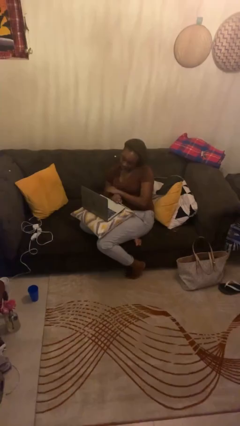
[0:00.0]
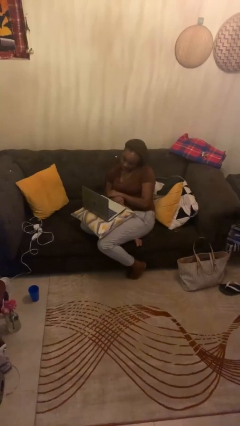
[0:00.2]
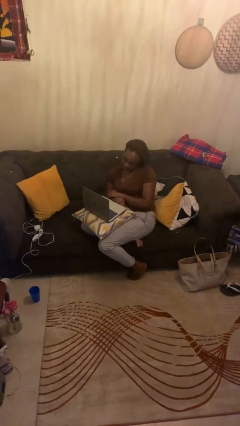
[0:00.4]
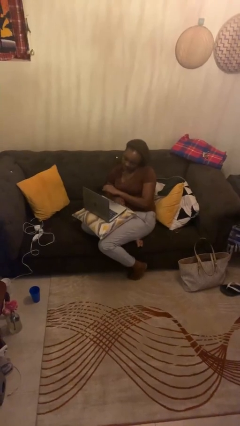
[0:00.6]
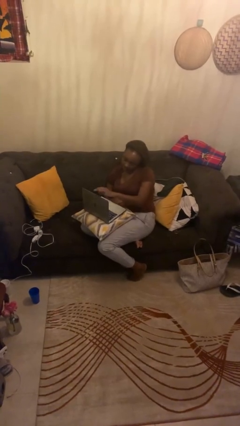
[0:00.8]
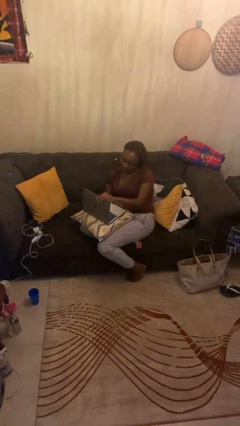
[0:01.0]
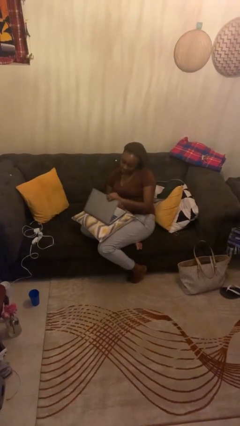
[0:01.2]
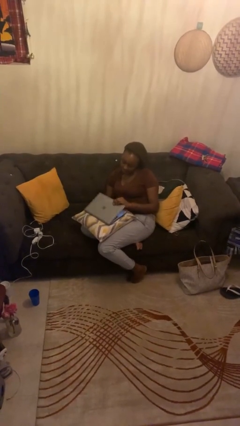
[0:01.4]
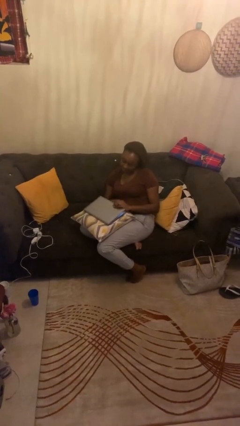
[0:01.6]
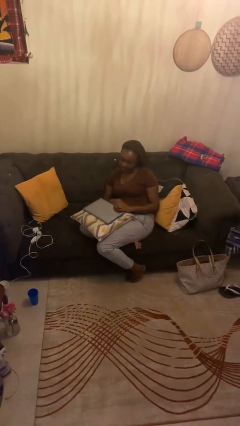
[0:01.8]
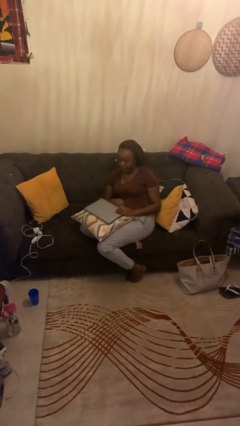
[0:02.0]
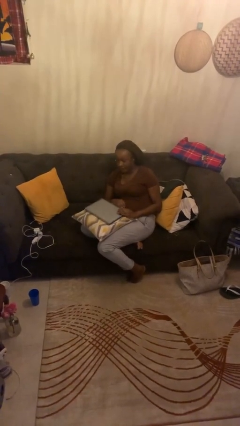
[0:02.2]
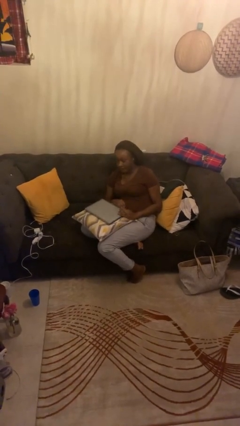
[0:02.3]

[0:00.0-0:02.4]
person closes laptop

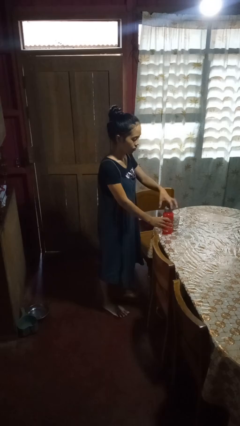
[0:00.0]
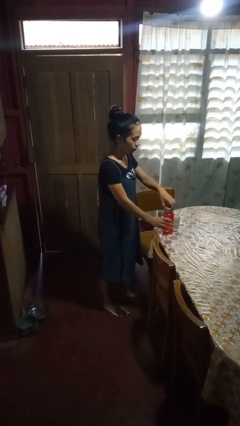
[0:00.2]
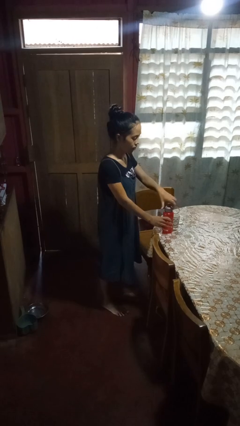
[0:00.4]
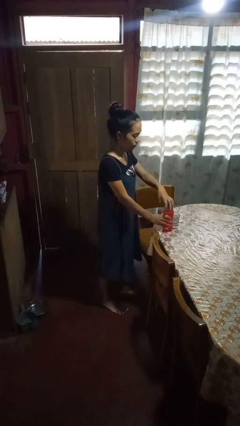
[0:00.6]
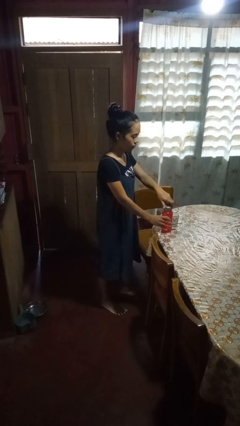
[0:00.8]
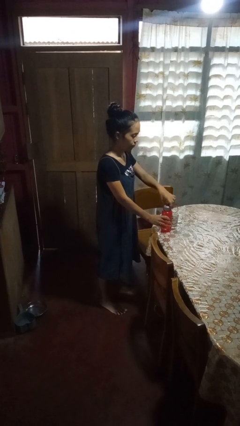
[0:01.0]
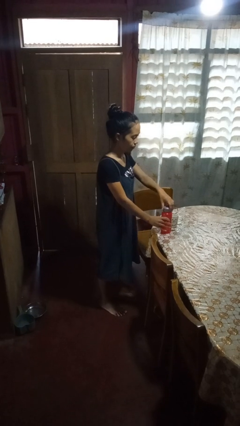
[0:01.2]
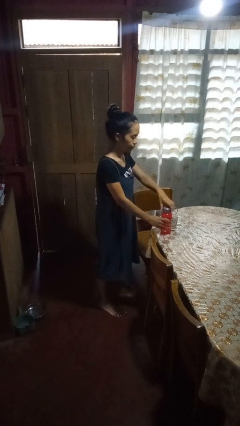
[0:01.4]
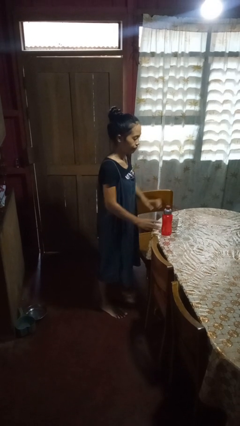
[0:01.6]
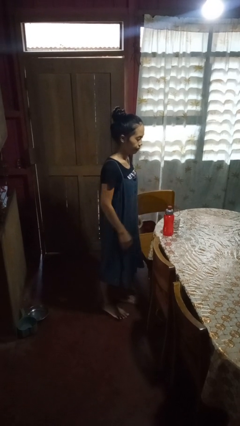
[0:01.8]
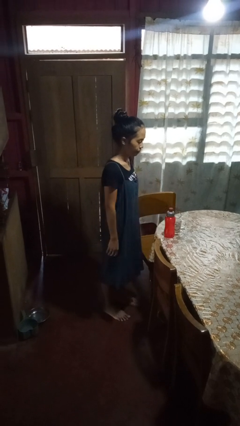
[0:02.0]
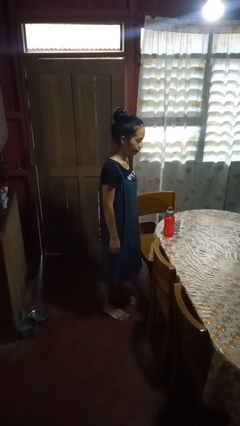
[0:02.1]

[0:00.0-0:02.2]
person screws lid to bottle

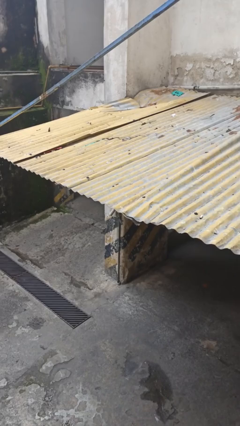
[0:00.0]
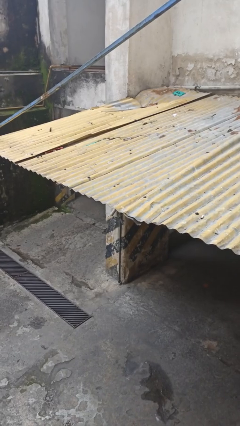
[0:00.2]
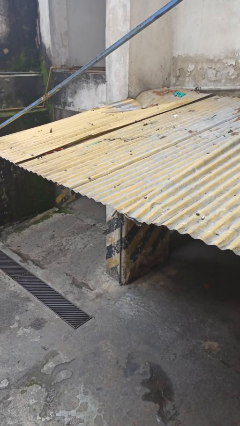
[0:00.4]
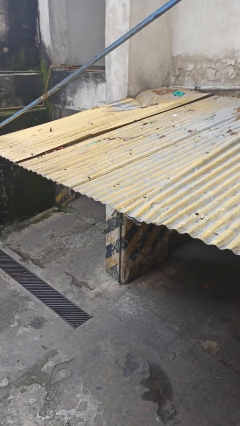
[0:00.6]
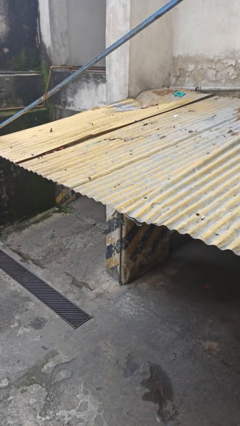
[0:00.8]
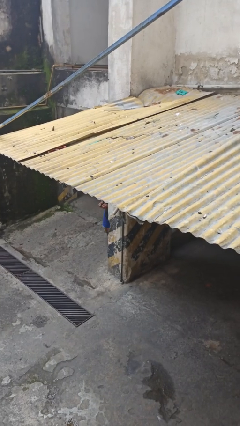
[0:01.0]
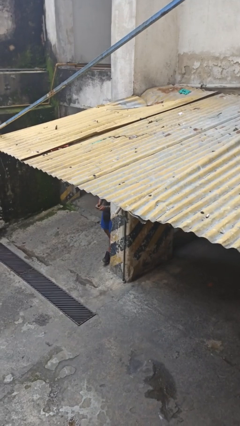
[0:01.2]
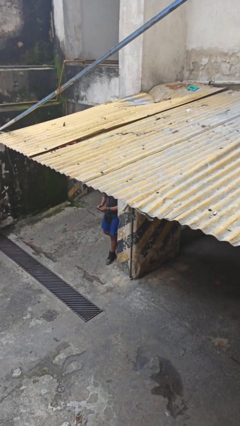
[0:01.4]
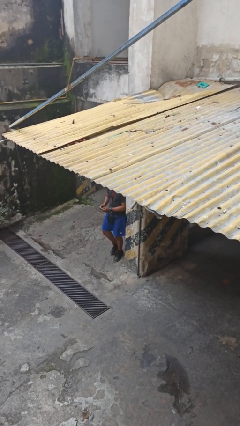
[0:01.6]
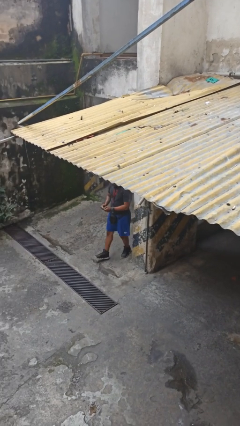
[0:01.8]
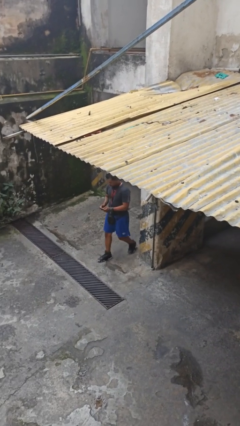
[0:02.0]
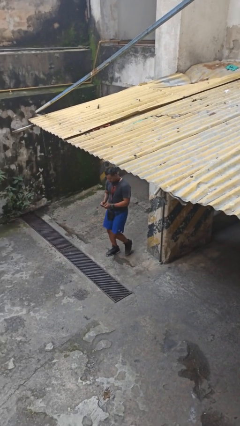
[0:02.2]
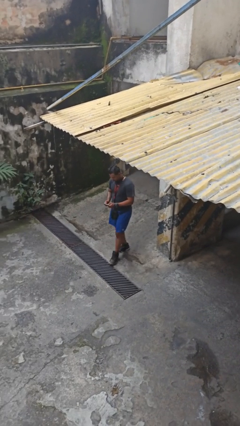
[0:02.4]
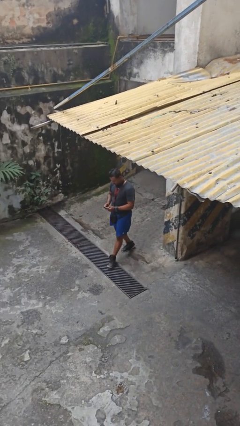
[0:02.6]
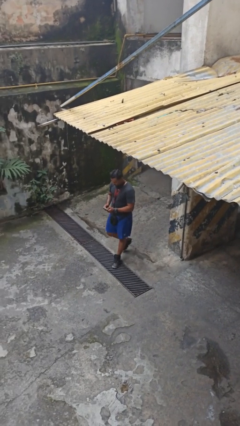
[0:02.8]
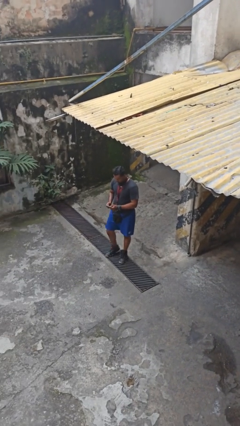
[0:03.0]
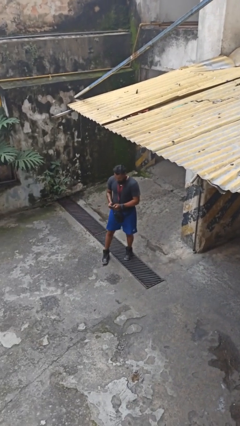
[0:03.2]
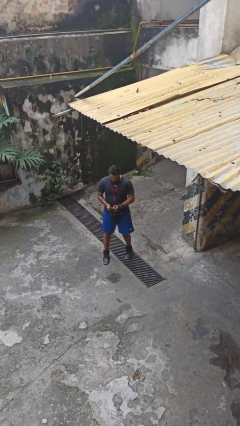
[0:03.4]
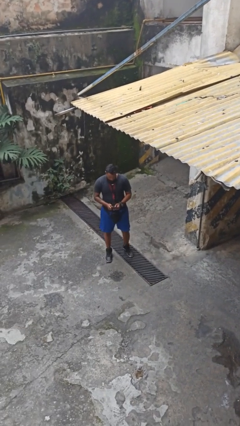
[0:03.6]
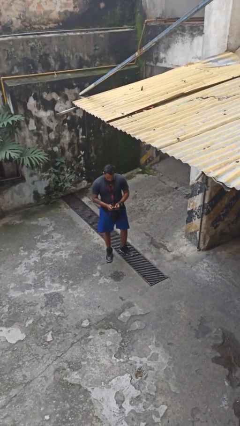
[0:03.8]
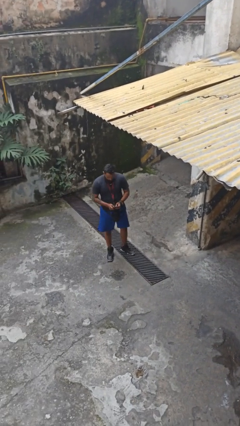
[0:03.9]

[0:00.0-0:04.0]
person enters scene through structure

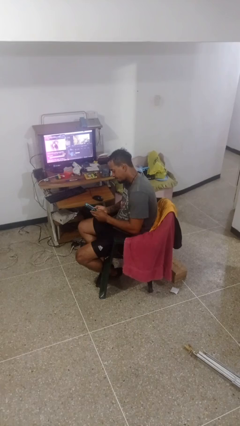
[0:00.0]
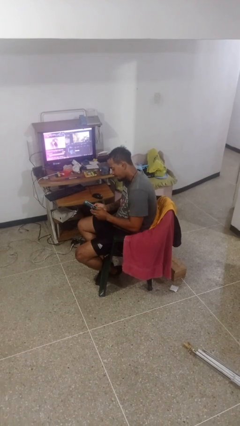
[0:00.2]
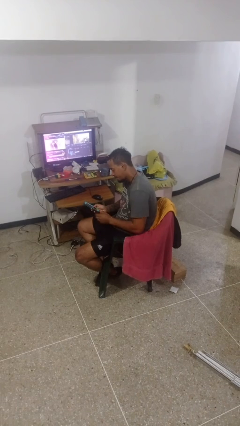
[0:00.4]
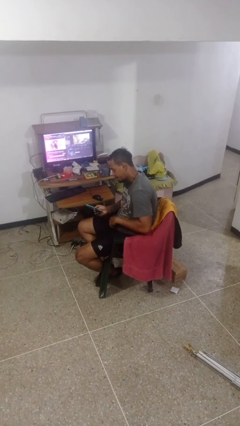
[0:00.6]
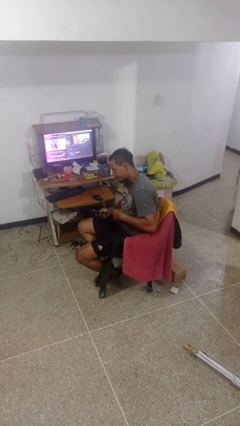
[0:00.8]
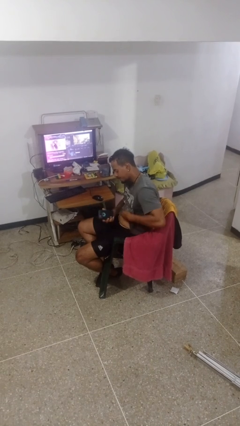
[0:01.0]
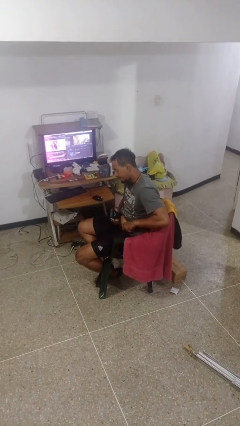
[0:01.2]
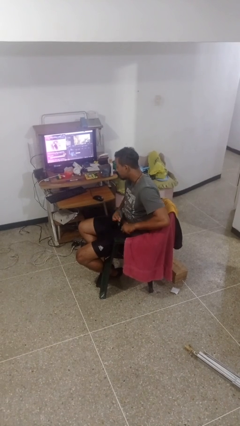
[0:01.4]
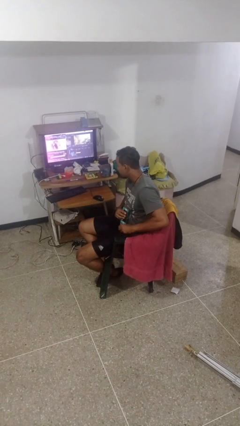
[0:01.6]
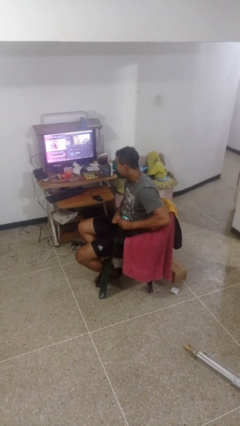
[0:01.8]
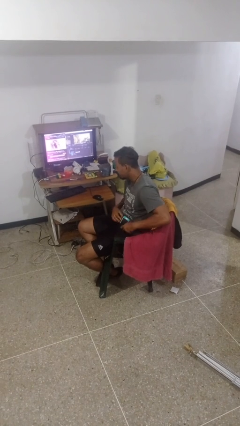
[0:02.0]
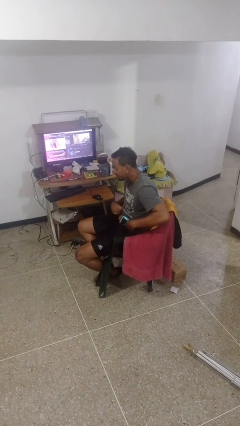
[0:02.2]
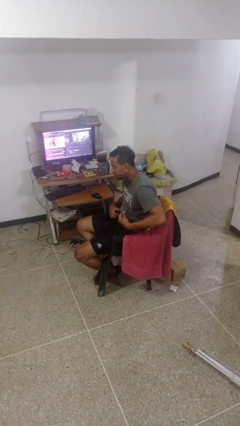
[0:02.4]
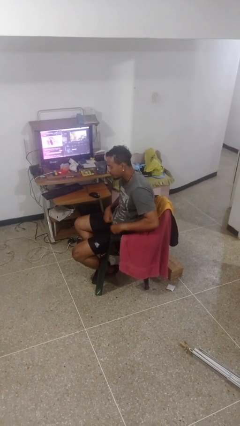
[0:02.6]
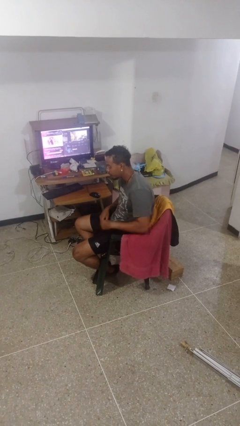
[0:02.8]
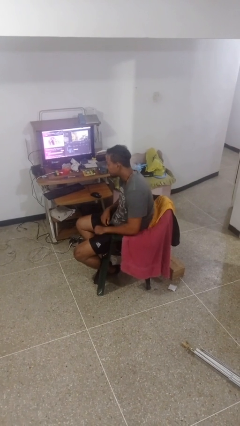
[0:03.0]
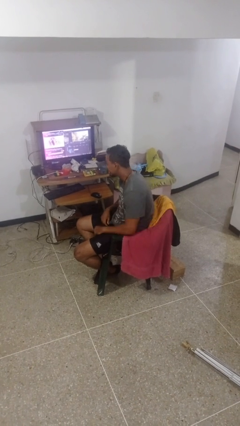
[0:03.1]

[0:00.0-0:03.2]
person puts phone into pocket

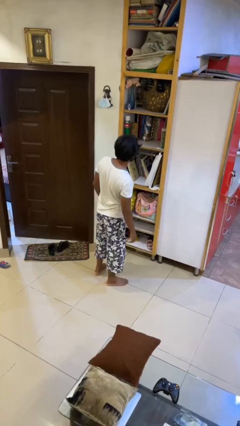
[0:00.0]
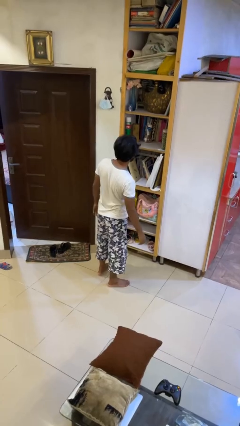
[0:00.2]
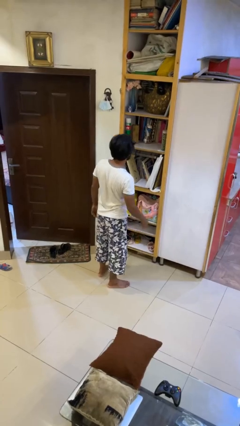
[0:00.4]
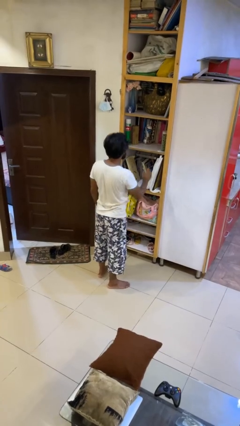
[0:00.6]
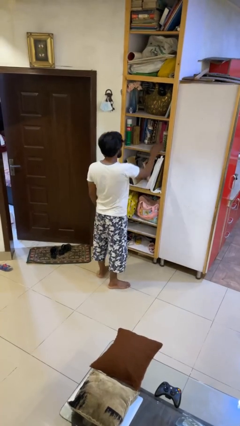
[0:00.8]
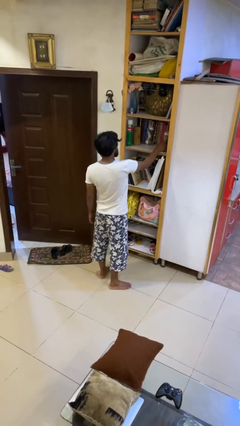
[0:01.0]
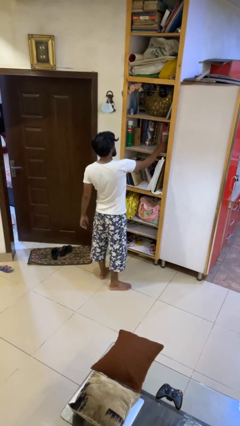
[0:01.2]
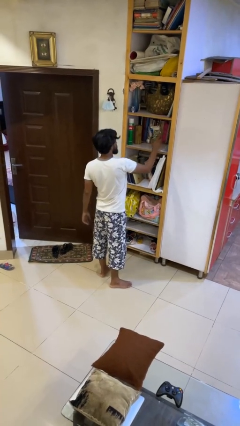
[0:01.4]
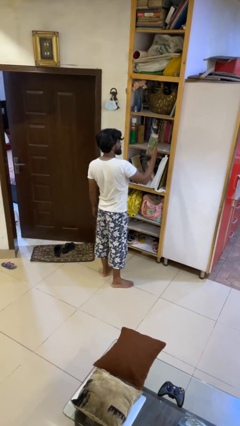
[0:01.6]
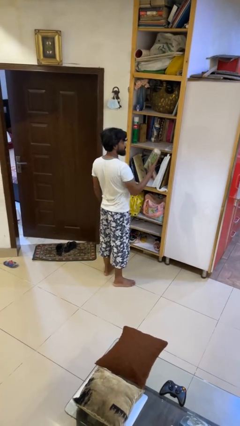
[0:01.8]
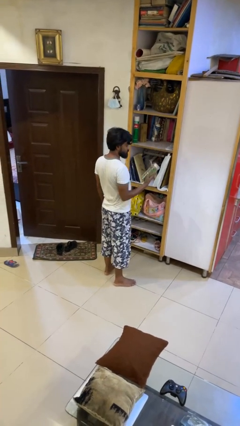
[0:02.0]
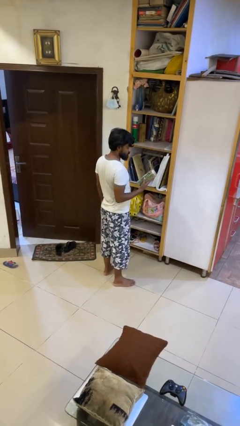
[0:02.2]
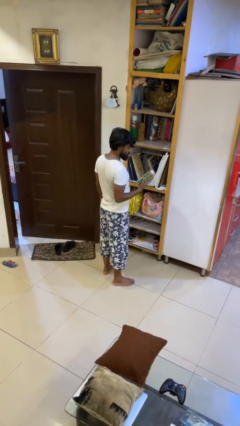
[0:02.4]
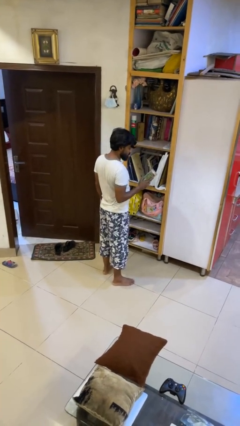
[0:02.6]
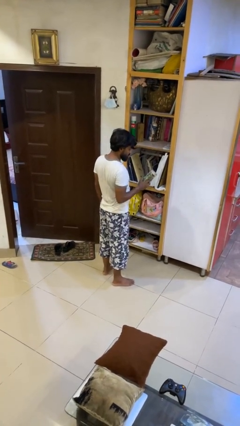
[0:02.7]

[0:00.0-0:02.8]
person picks up object from cabinet

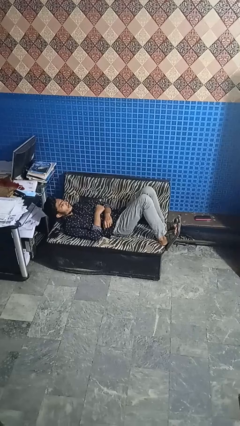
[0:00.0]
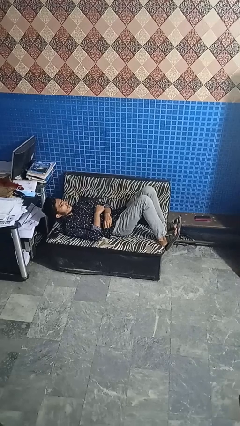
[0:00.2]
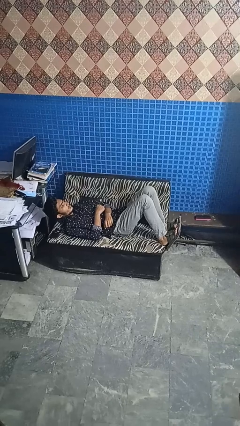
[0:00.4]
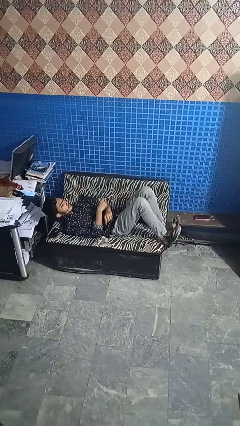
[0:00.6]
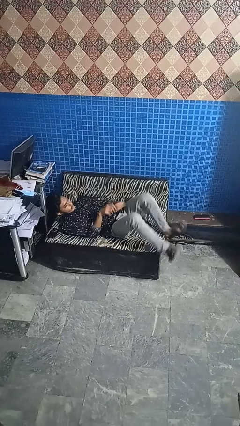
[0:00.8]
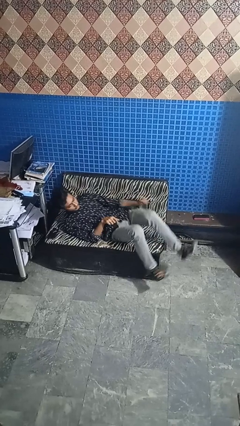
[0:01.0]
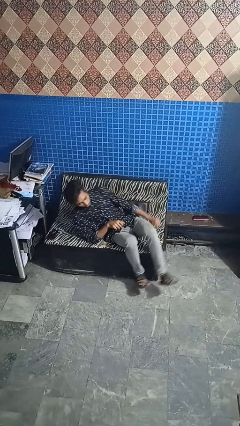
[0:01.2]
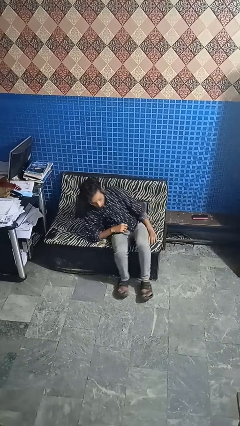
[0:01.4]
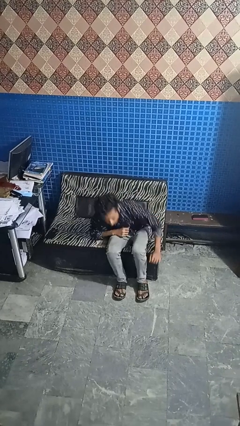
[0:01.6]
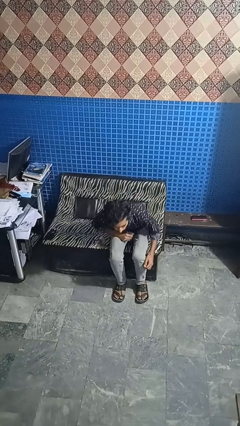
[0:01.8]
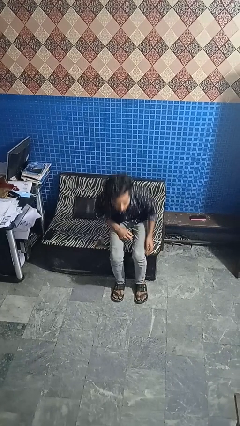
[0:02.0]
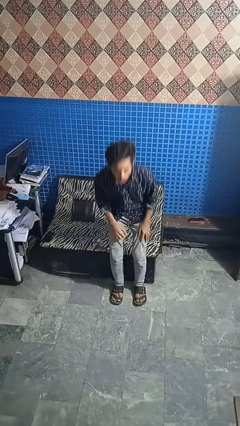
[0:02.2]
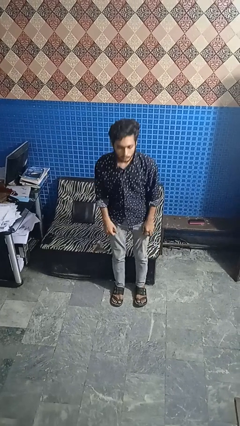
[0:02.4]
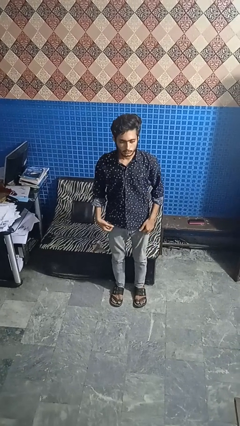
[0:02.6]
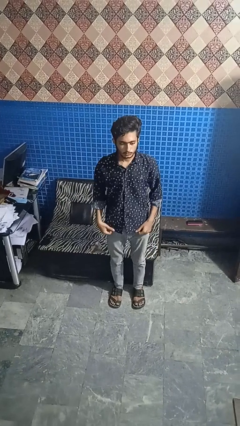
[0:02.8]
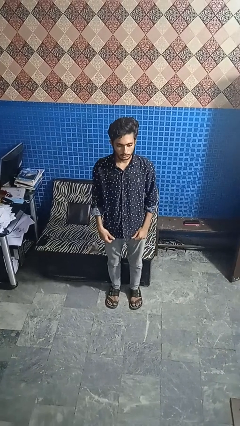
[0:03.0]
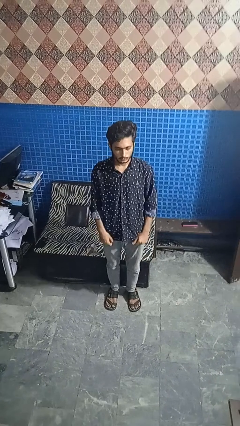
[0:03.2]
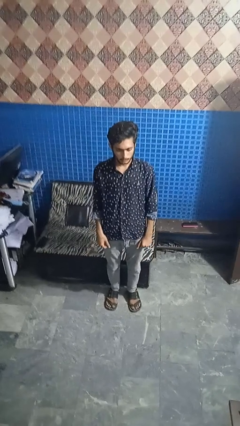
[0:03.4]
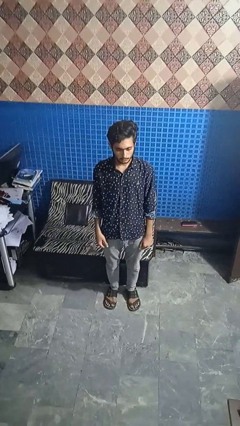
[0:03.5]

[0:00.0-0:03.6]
person stands up
